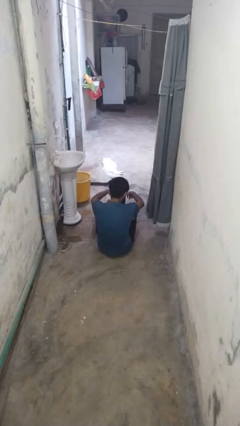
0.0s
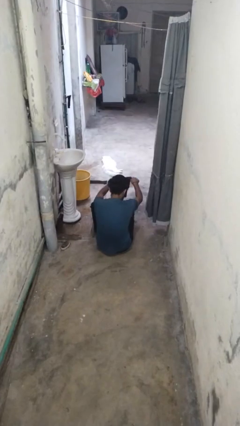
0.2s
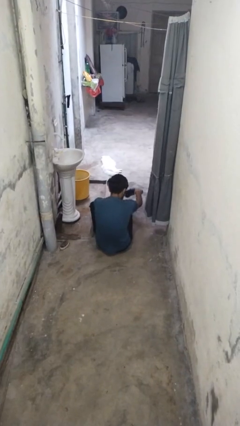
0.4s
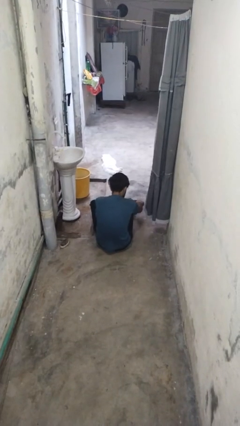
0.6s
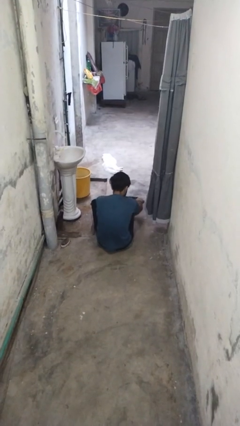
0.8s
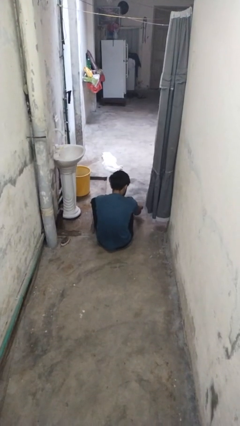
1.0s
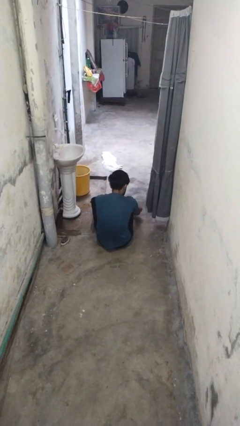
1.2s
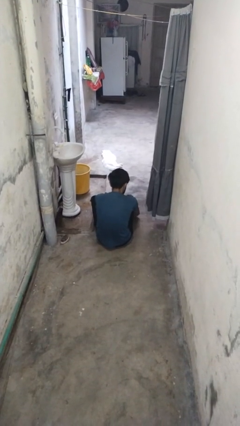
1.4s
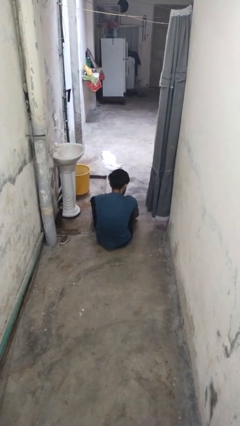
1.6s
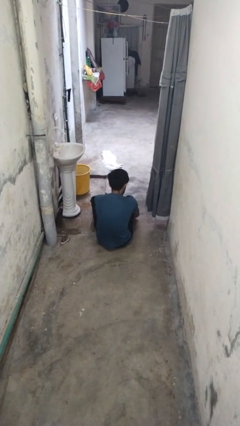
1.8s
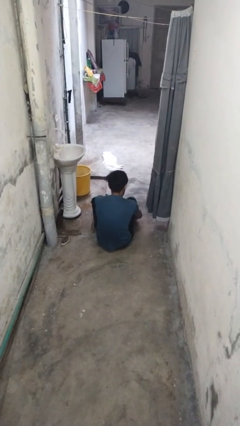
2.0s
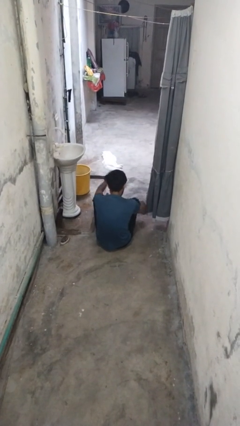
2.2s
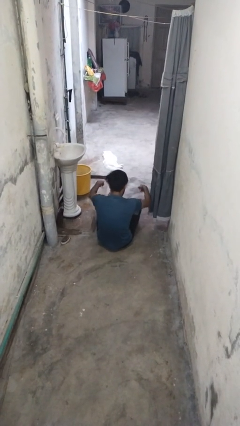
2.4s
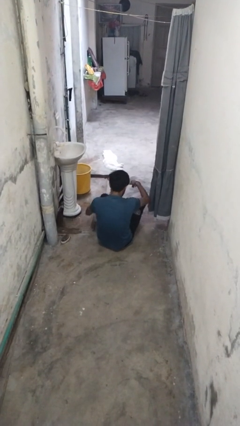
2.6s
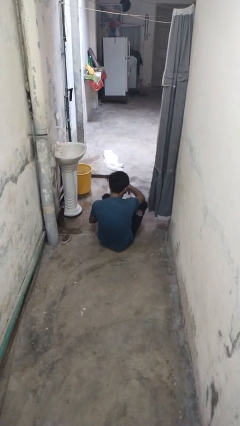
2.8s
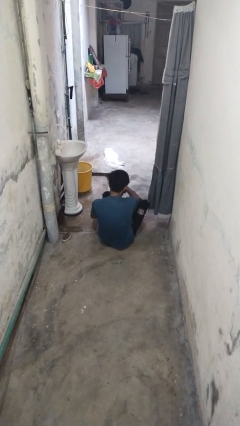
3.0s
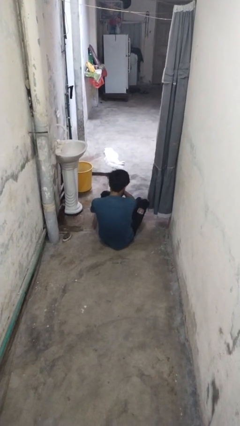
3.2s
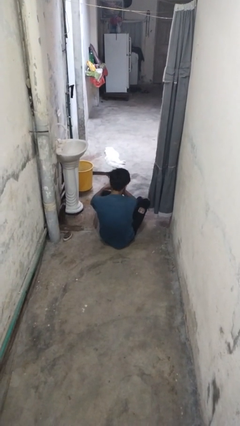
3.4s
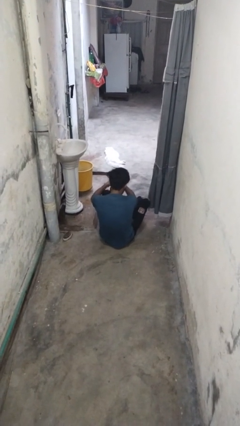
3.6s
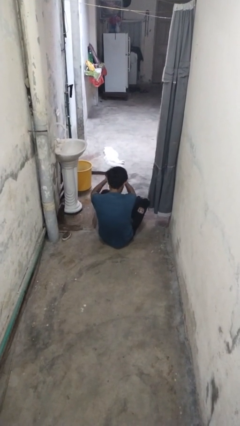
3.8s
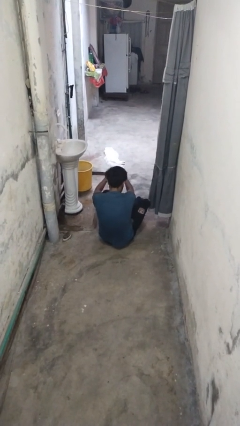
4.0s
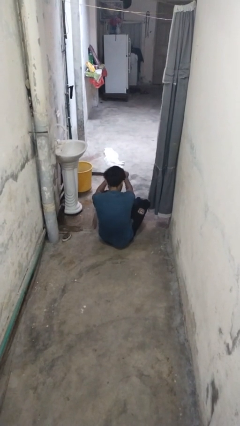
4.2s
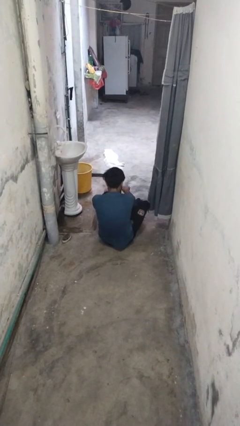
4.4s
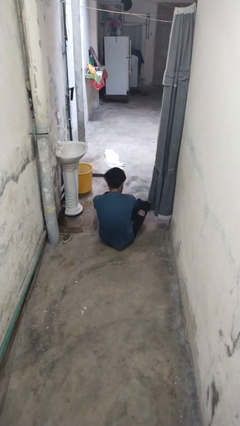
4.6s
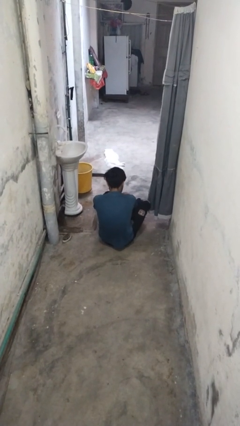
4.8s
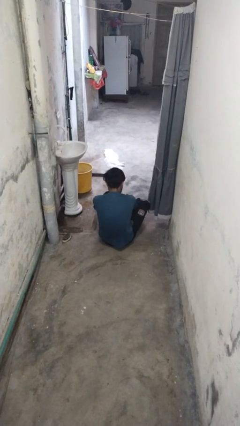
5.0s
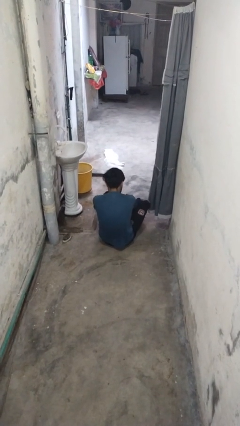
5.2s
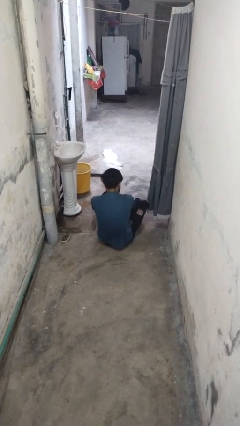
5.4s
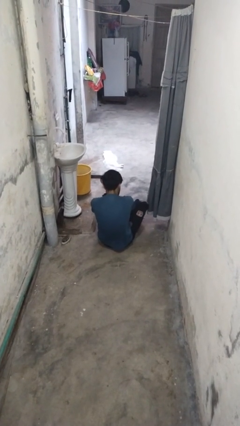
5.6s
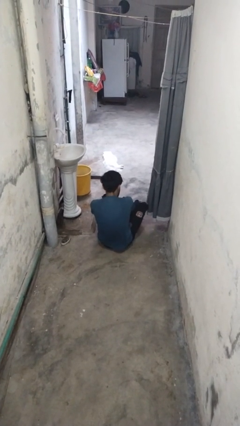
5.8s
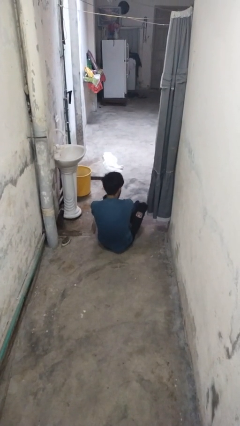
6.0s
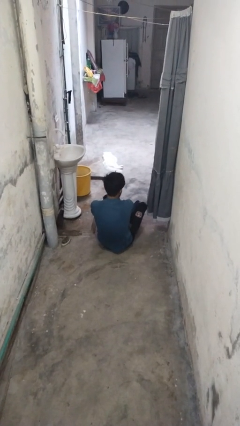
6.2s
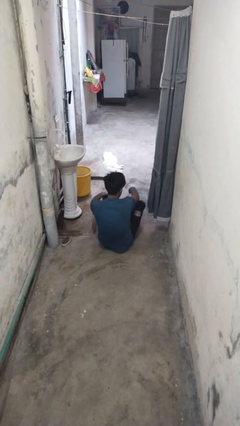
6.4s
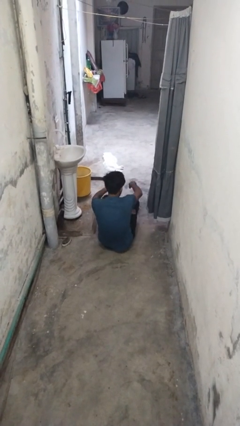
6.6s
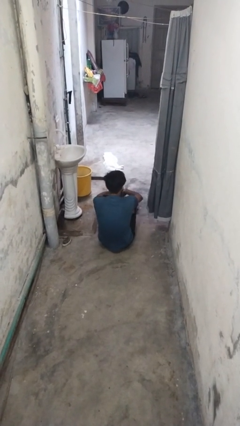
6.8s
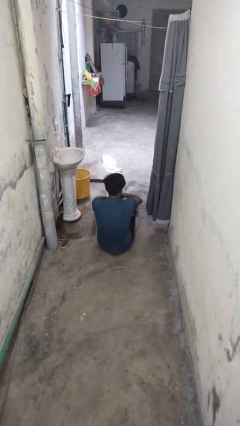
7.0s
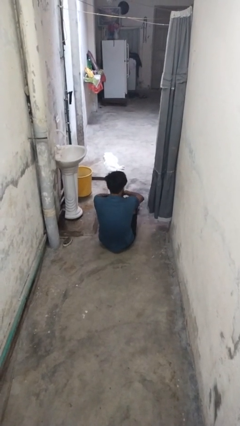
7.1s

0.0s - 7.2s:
person puts on socks

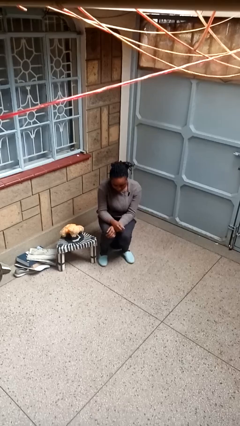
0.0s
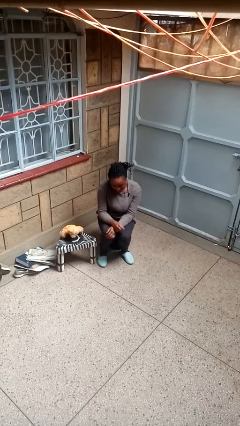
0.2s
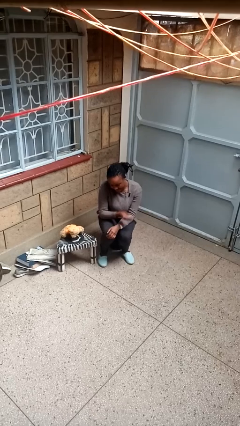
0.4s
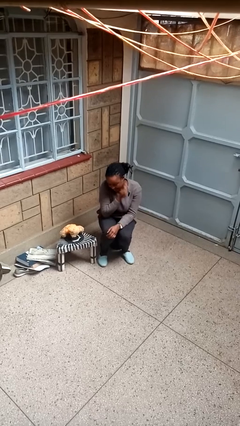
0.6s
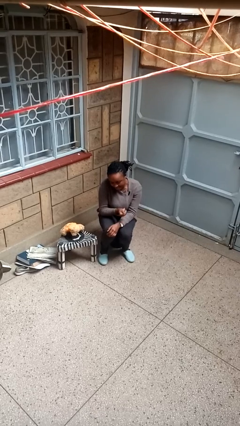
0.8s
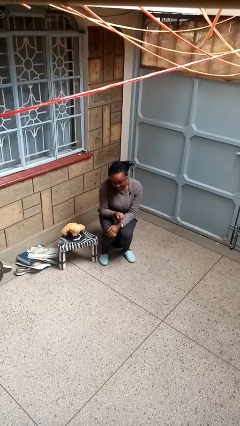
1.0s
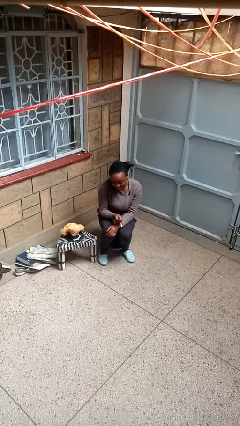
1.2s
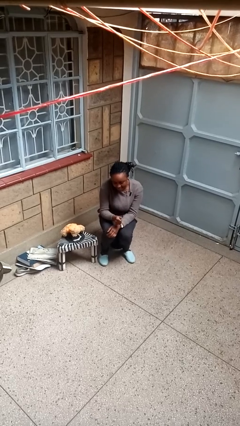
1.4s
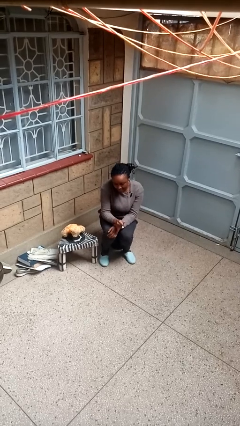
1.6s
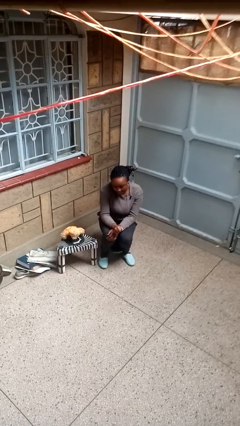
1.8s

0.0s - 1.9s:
person swats bug

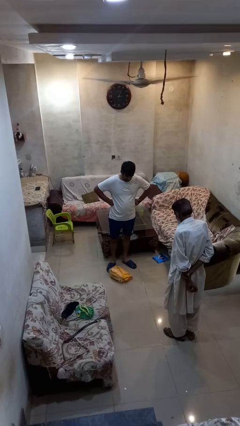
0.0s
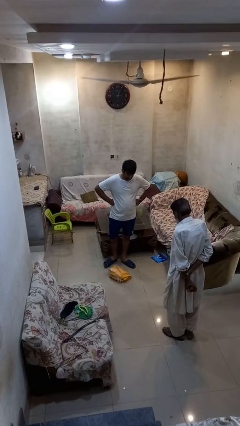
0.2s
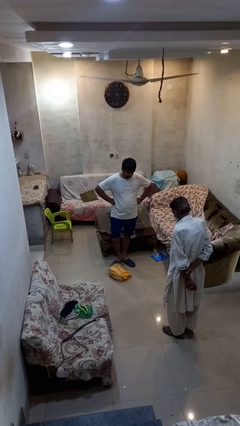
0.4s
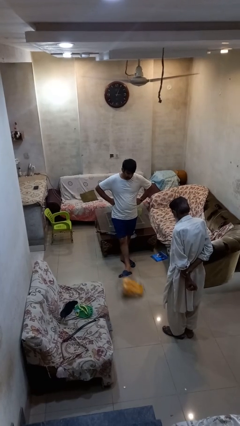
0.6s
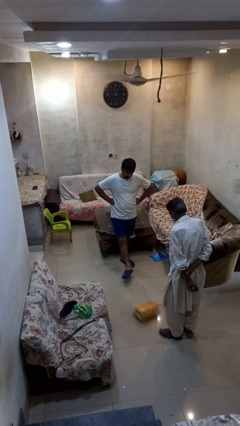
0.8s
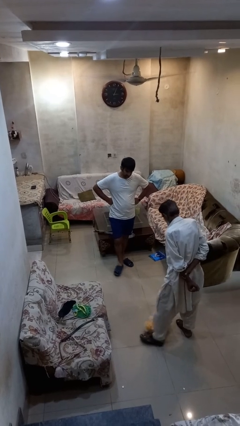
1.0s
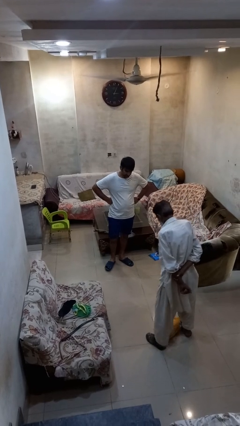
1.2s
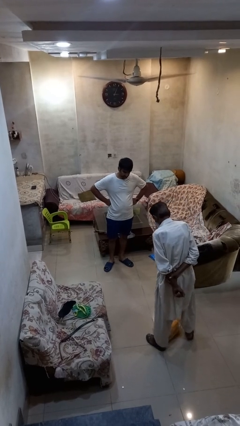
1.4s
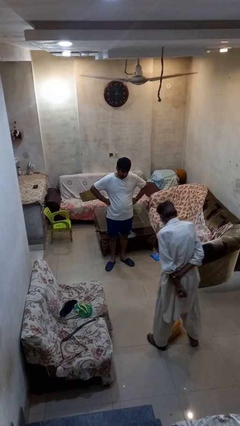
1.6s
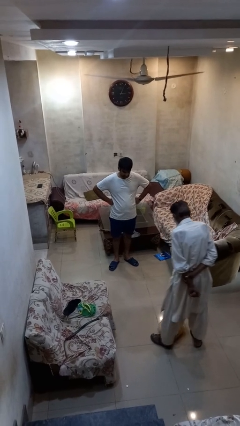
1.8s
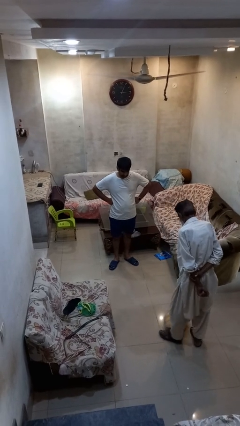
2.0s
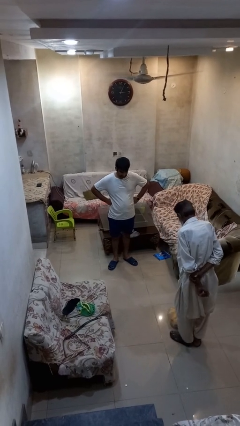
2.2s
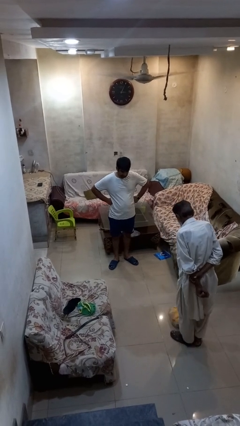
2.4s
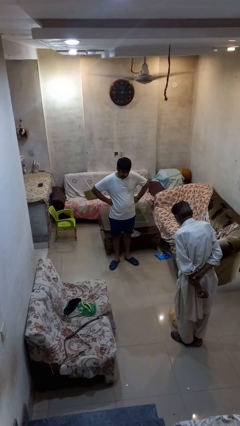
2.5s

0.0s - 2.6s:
person kicks object to person

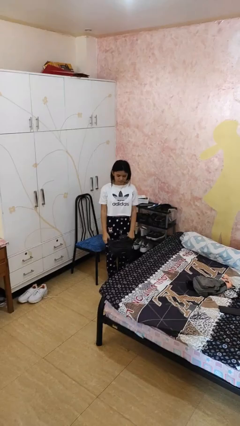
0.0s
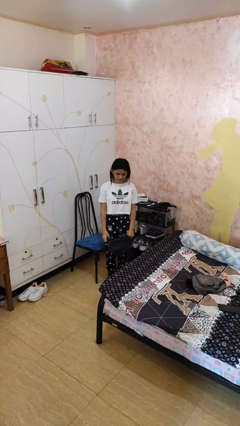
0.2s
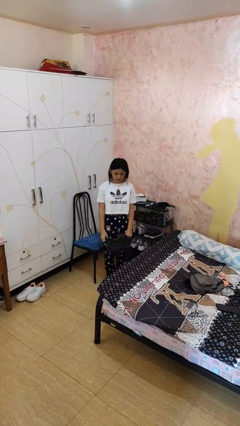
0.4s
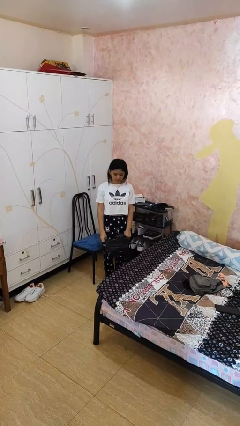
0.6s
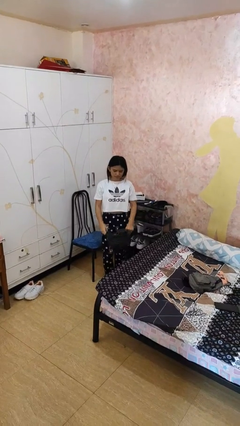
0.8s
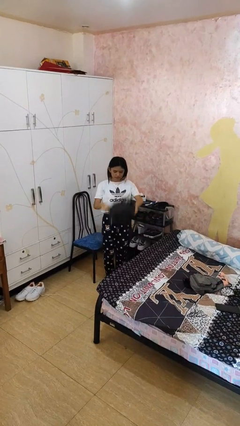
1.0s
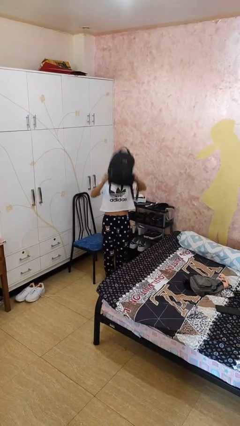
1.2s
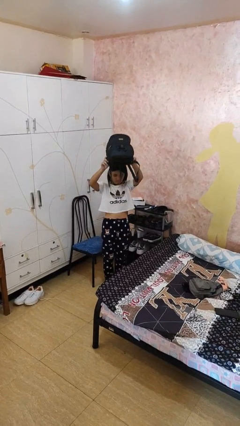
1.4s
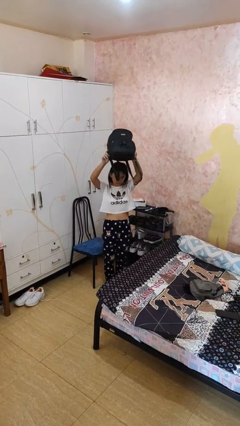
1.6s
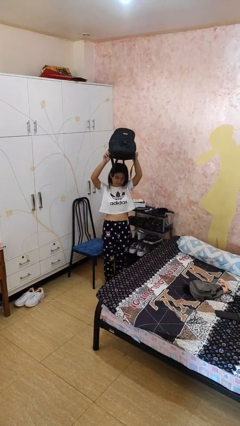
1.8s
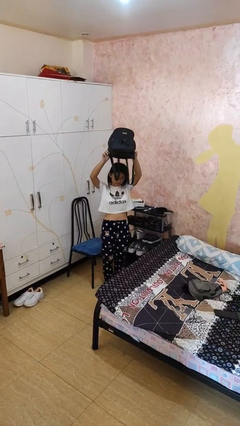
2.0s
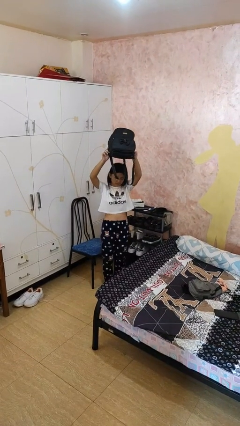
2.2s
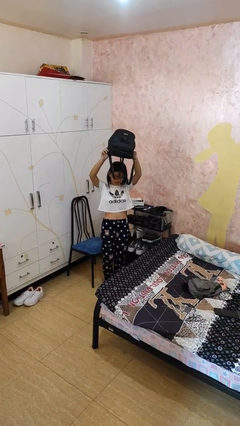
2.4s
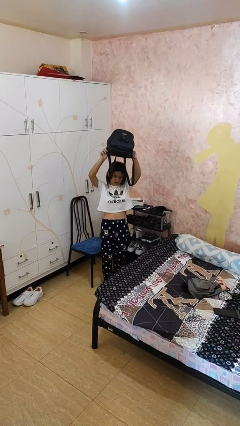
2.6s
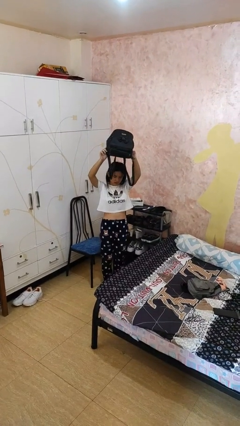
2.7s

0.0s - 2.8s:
person holds object above head

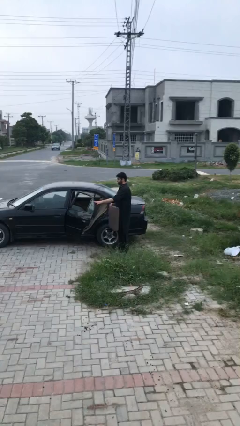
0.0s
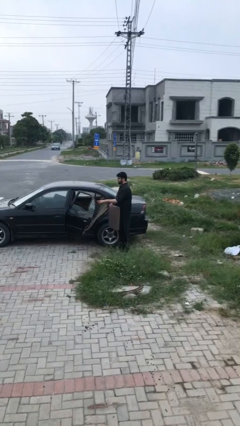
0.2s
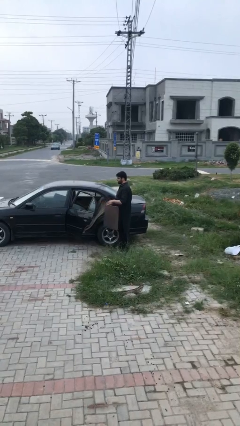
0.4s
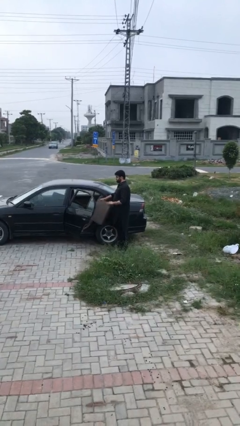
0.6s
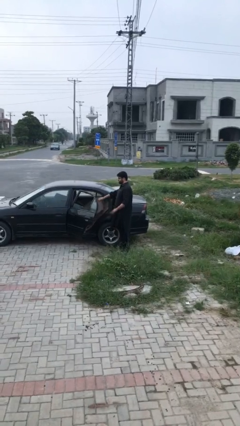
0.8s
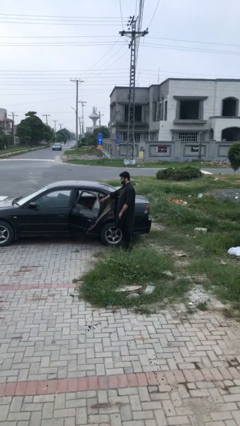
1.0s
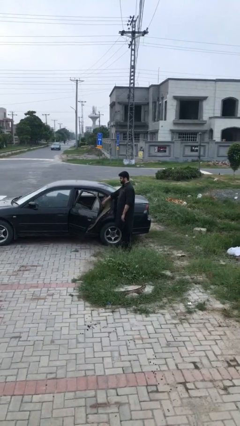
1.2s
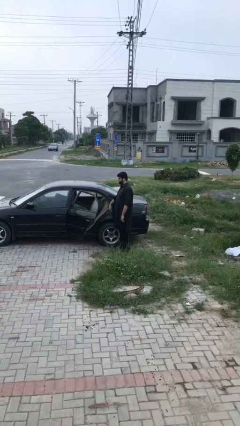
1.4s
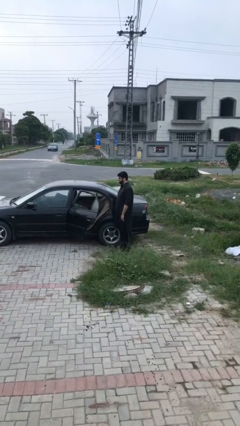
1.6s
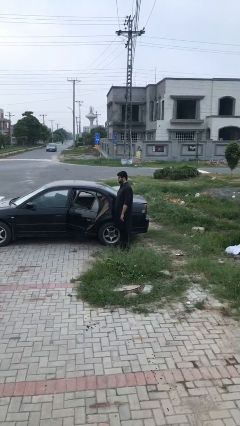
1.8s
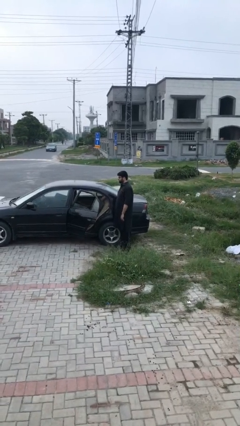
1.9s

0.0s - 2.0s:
person loads car

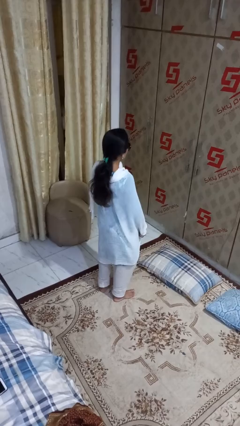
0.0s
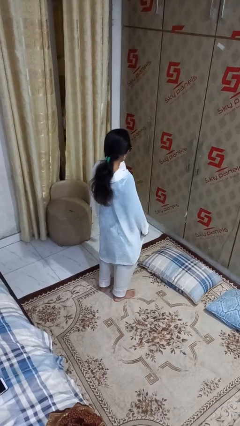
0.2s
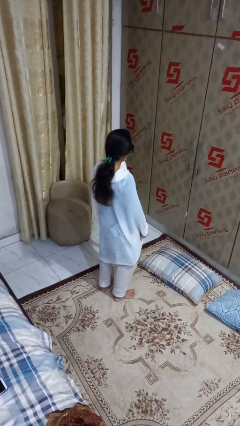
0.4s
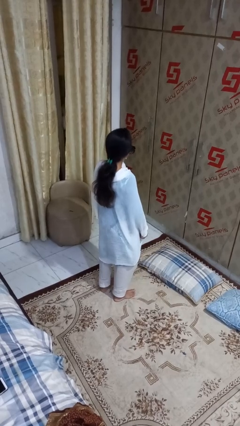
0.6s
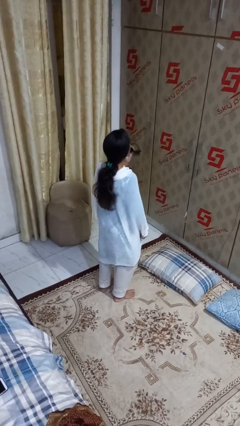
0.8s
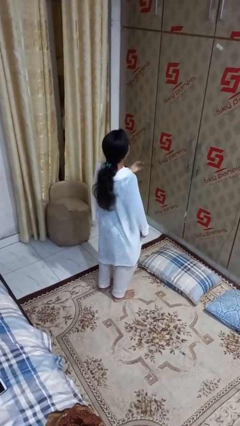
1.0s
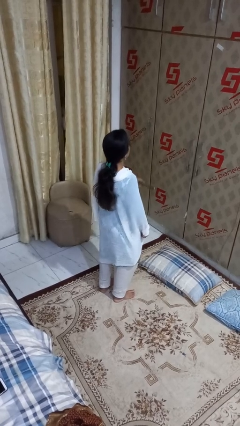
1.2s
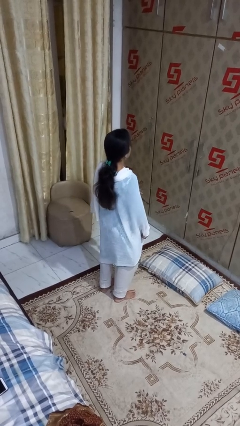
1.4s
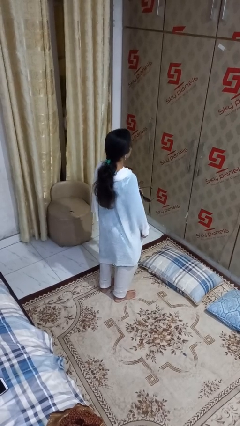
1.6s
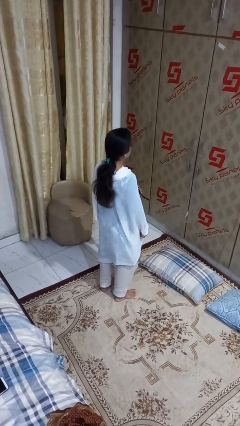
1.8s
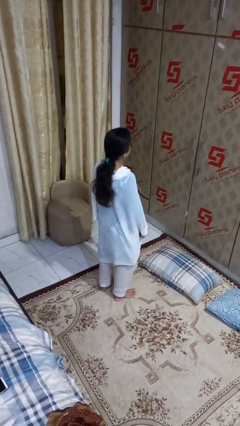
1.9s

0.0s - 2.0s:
person takes off sunglasses
